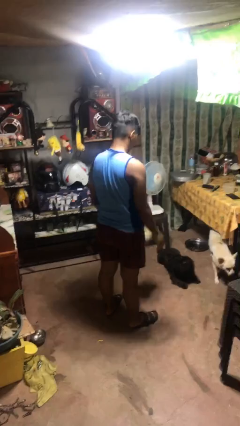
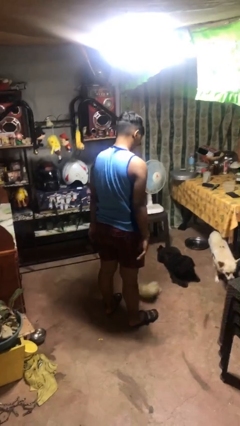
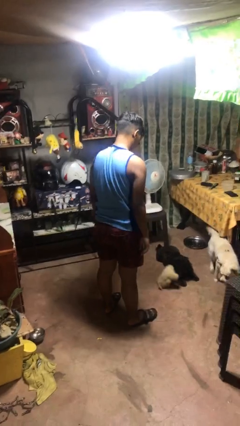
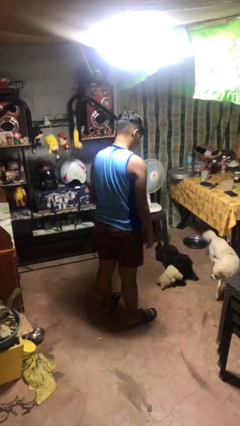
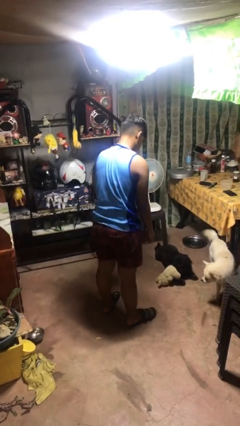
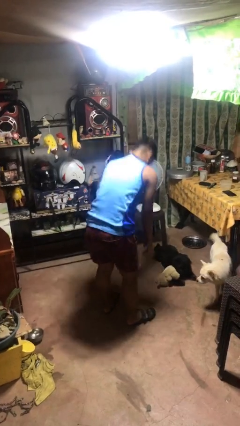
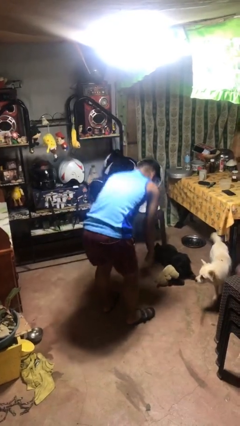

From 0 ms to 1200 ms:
person drops object

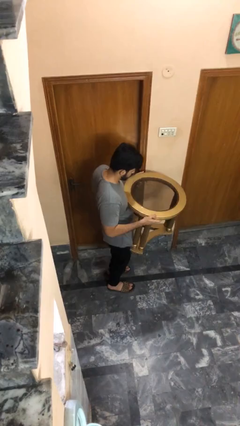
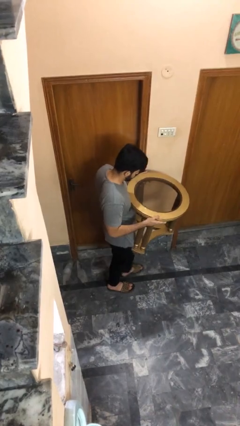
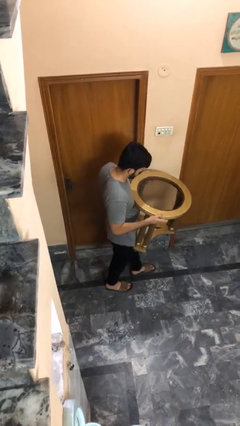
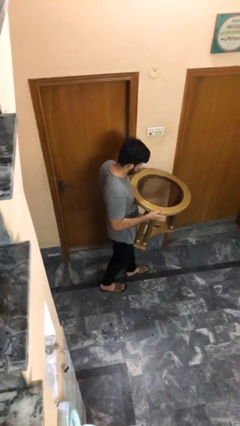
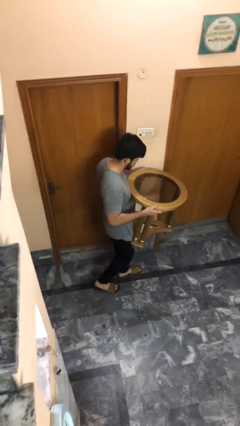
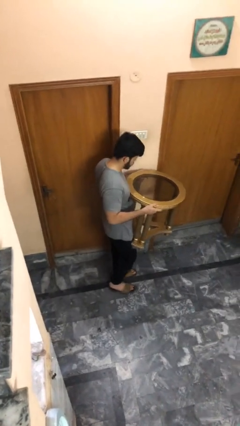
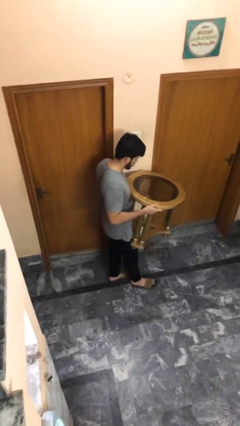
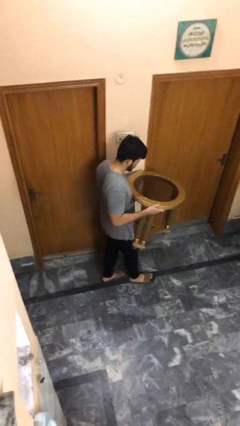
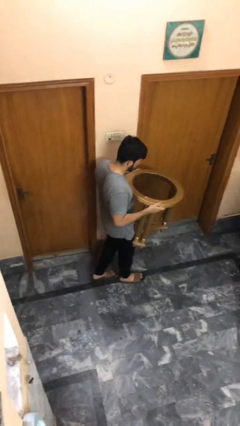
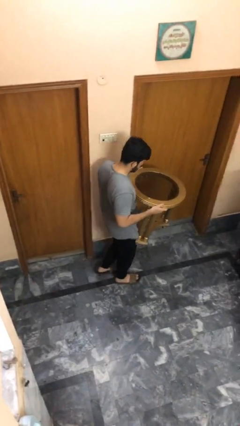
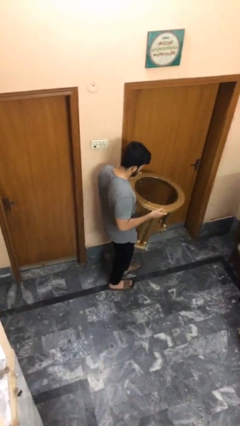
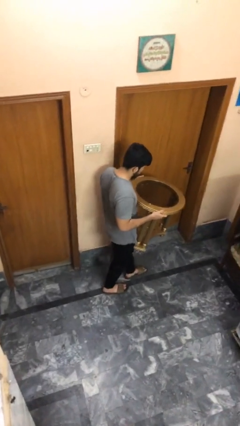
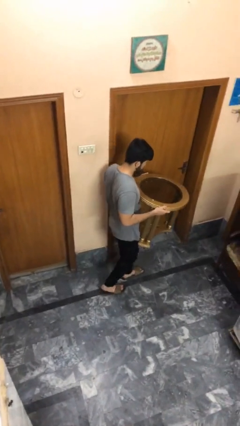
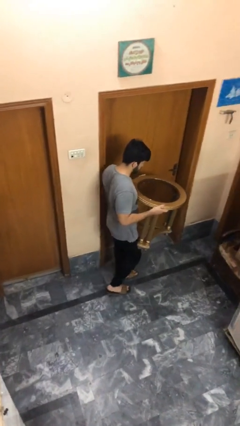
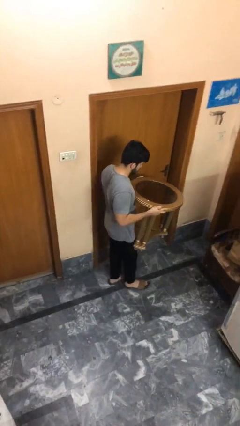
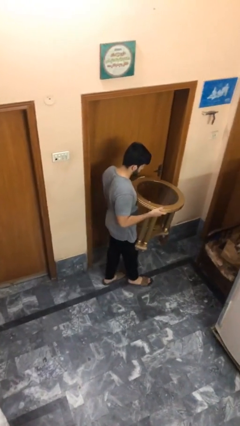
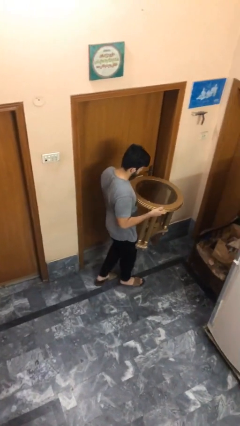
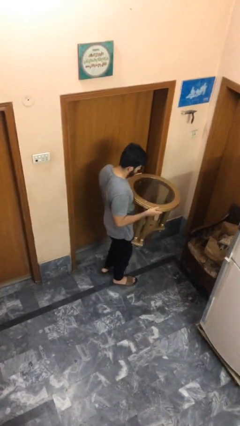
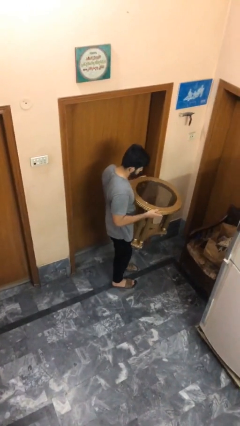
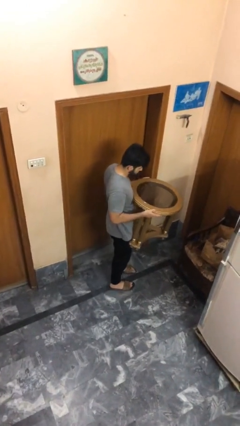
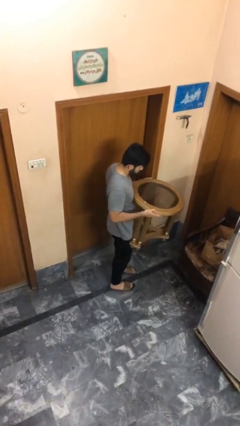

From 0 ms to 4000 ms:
person carries furniture

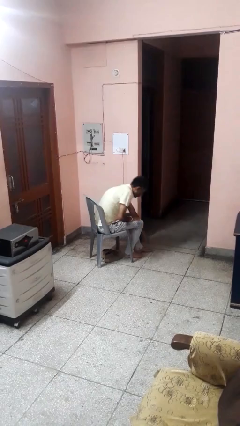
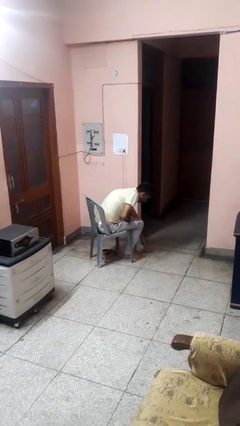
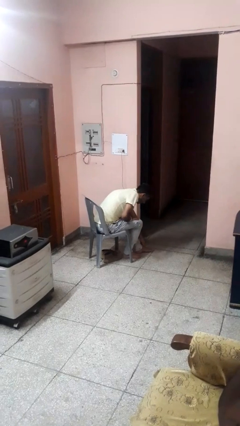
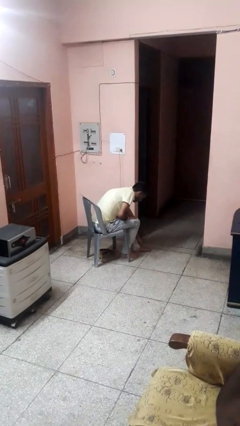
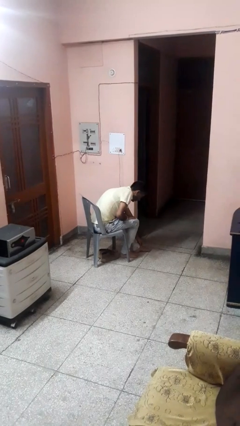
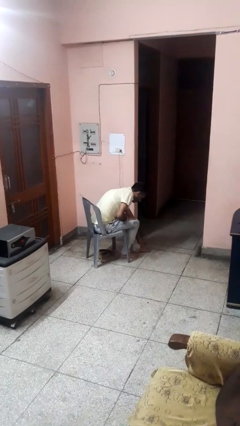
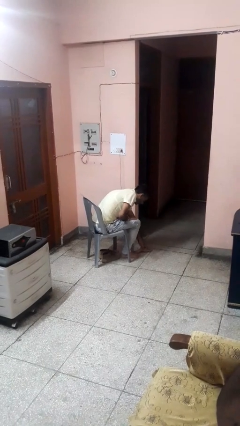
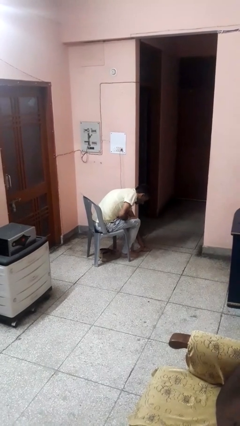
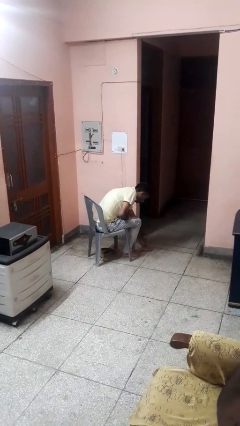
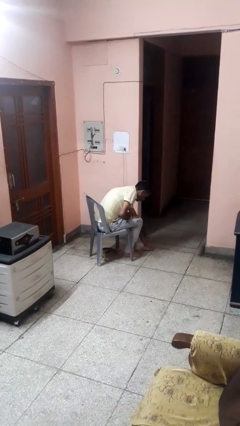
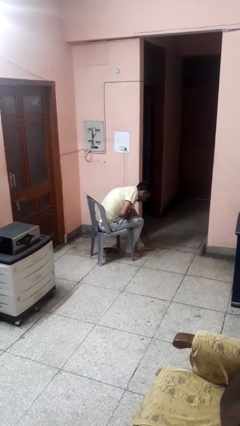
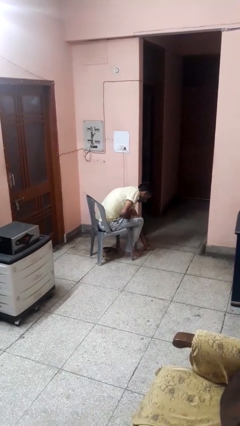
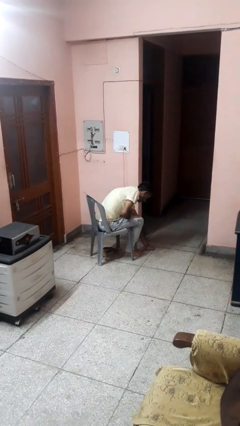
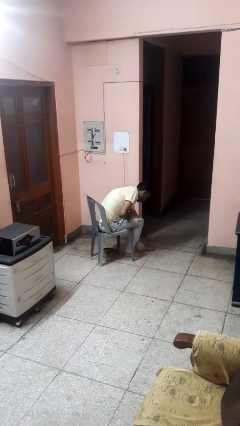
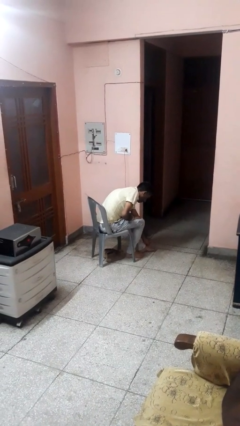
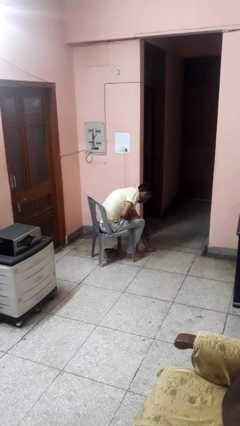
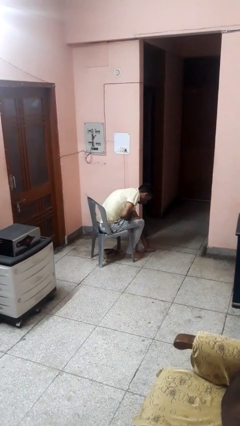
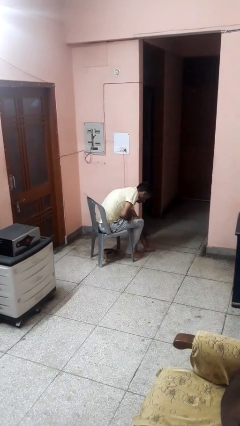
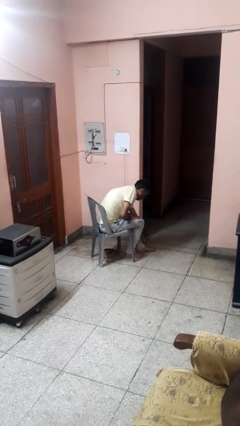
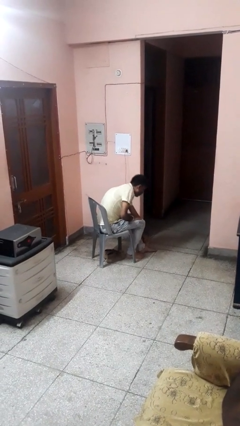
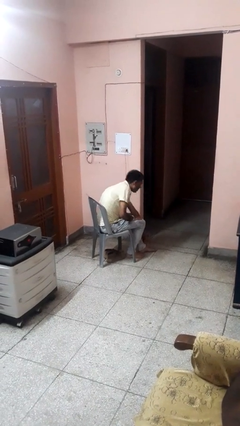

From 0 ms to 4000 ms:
person rubs foot

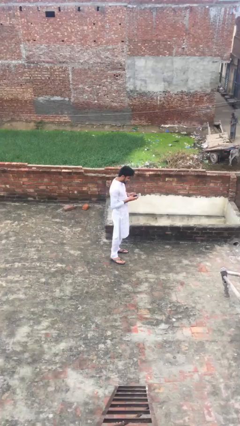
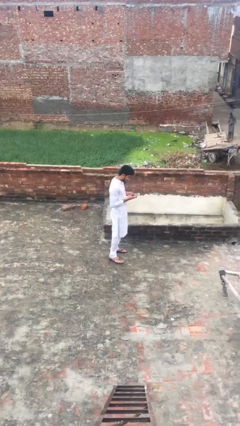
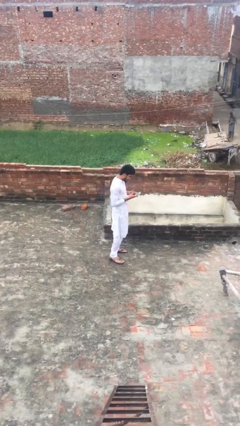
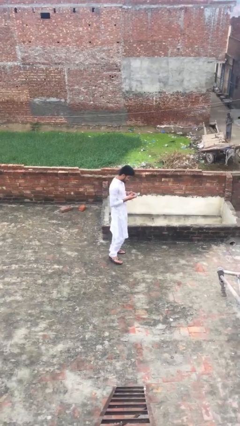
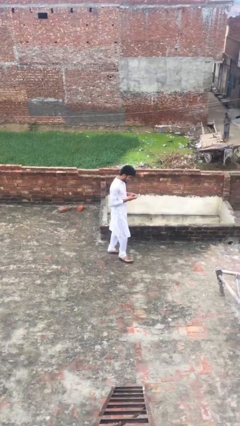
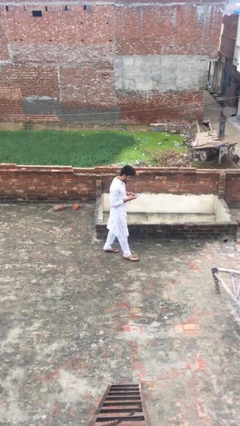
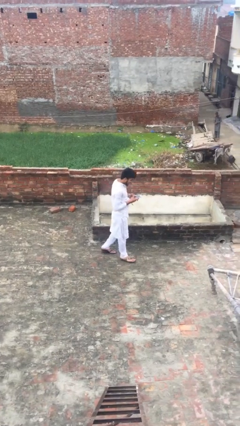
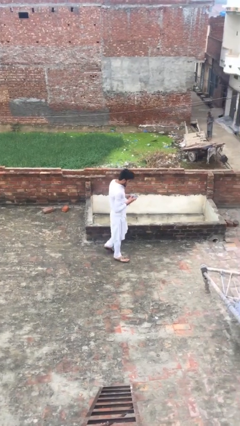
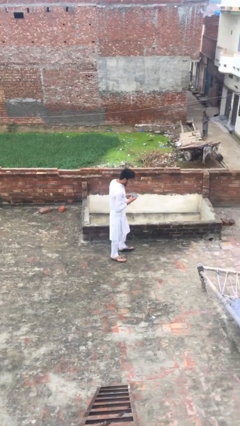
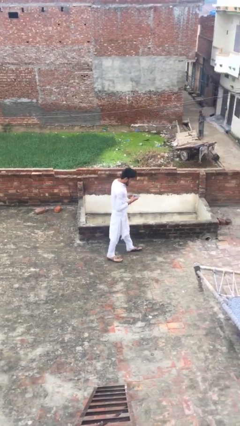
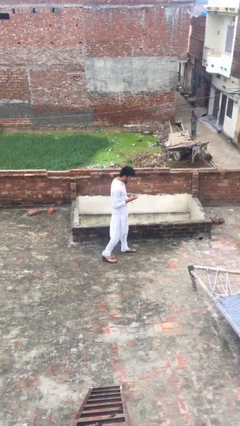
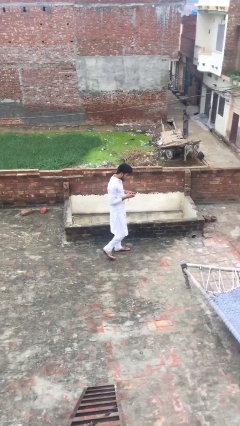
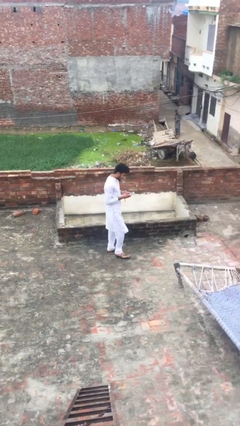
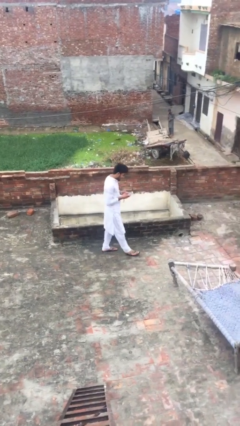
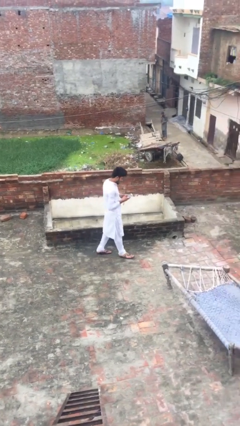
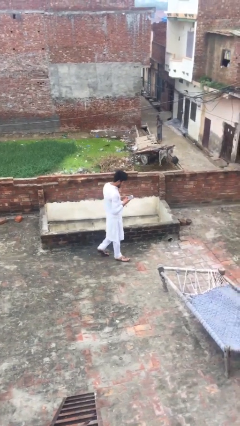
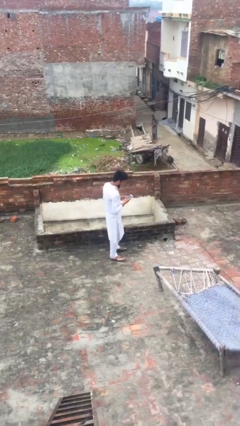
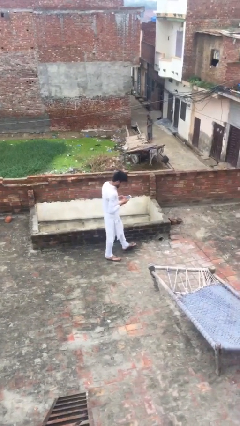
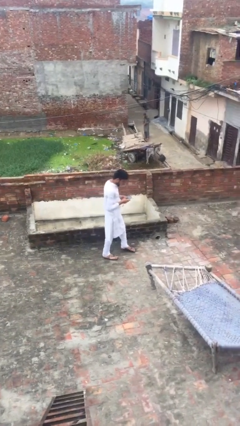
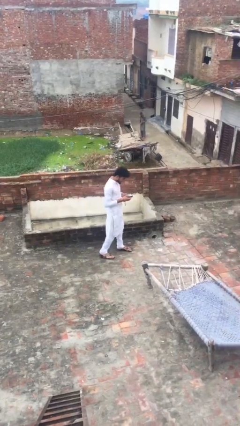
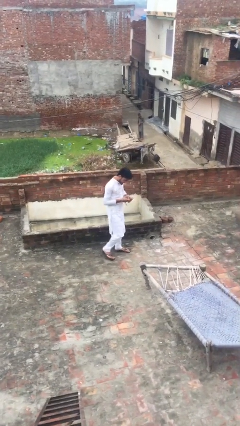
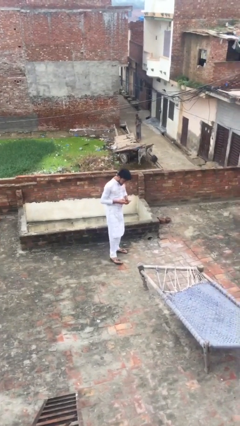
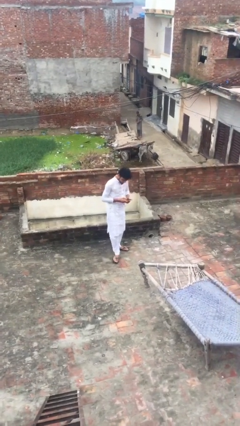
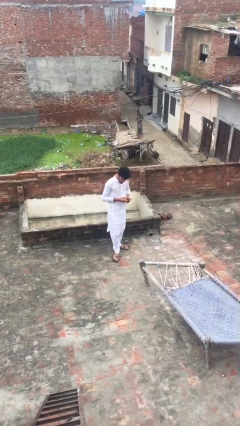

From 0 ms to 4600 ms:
person texts on phone

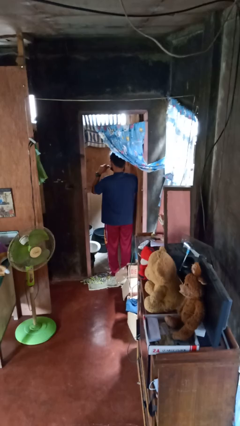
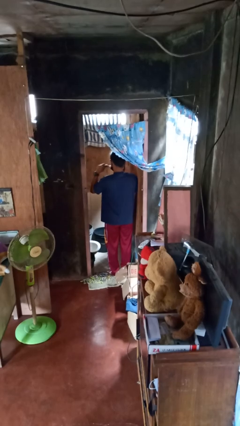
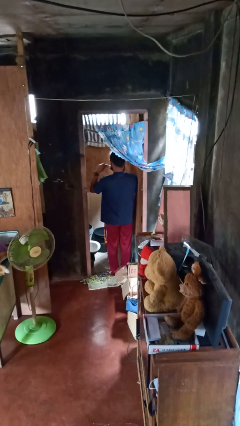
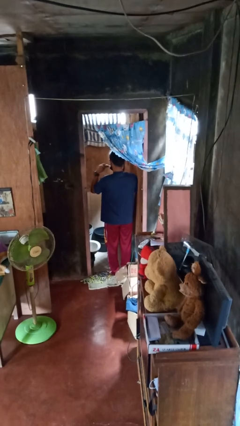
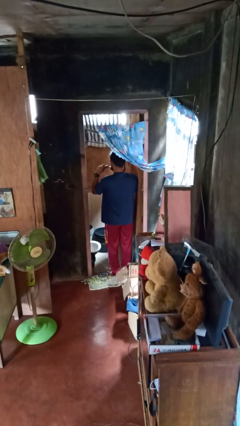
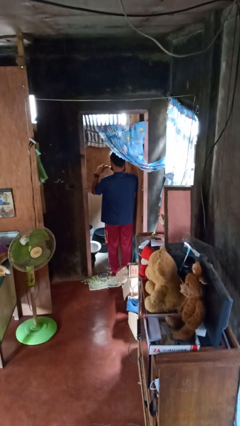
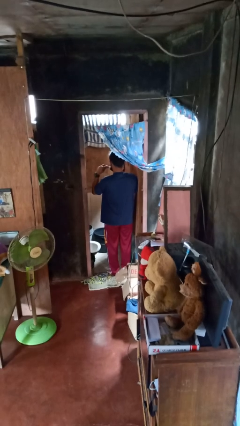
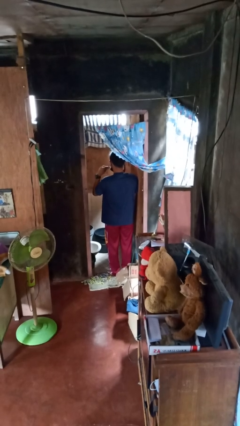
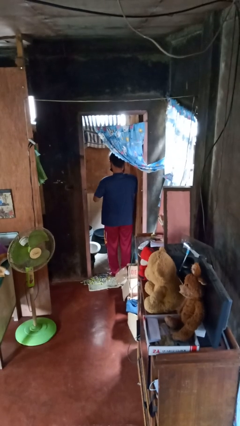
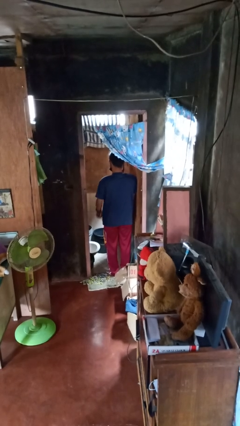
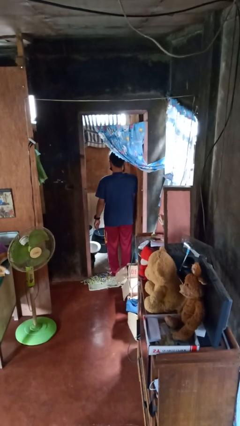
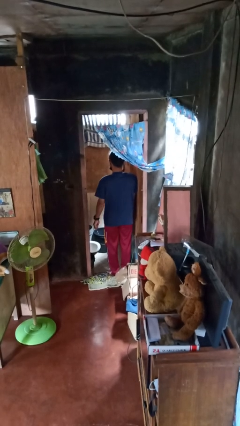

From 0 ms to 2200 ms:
person brushes teeth

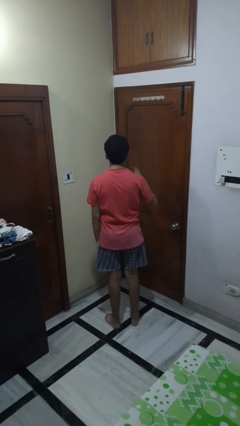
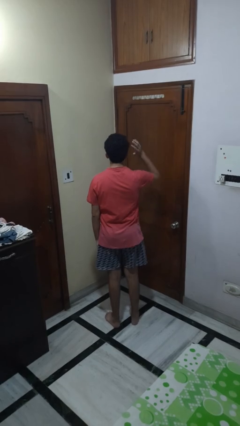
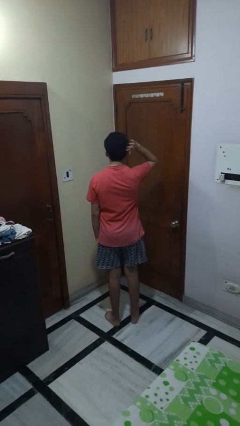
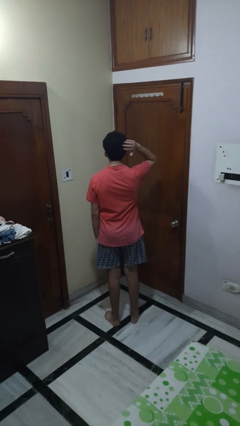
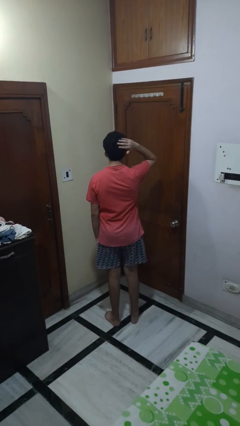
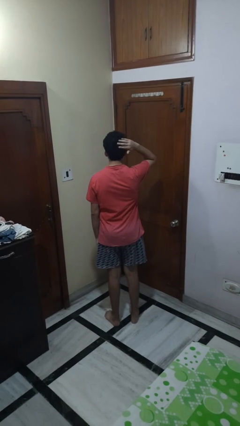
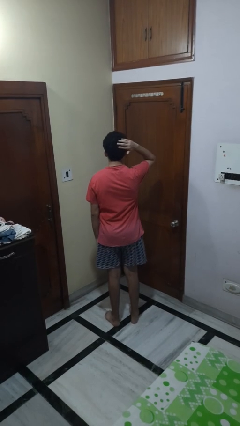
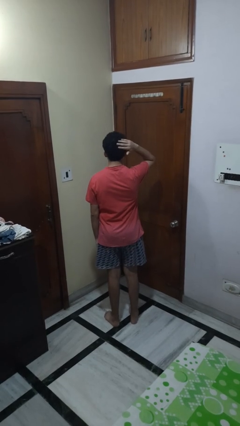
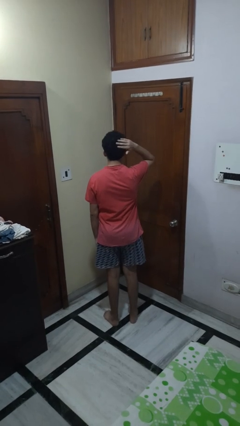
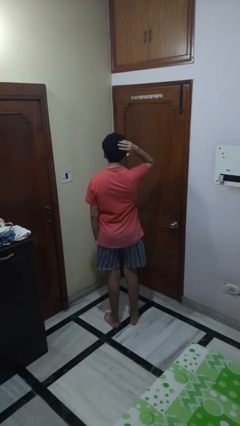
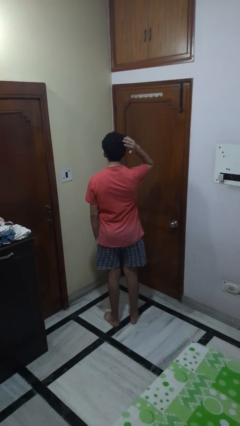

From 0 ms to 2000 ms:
person pats head
